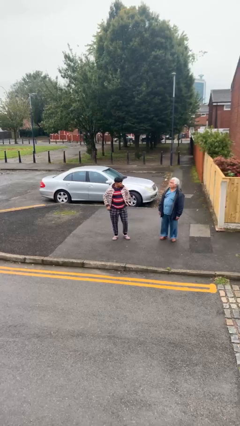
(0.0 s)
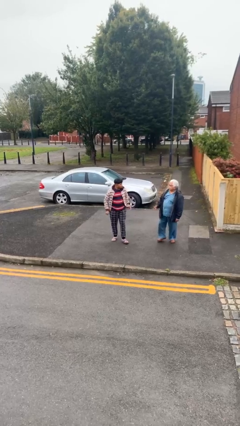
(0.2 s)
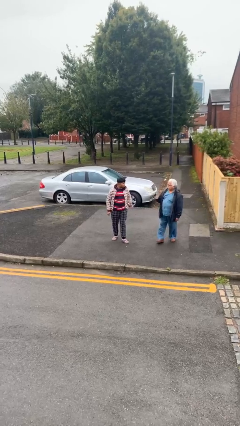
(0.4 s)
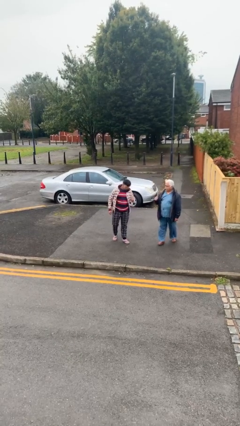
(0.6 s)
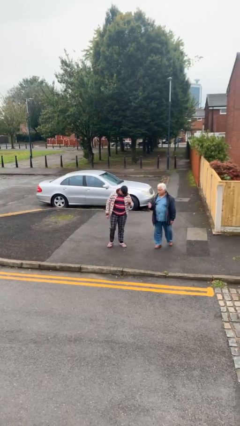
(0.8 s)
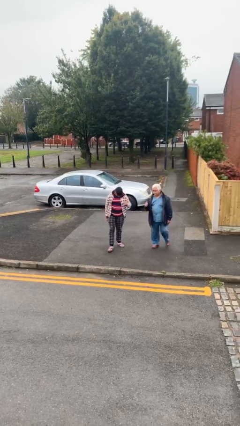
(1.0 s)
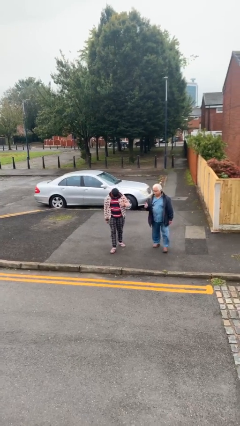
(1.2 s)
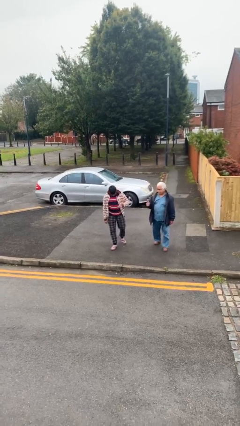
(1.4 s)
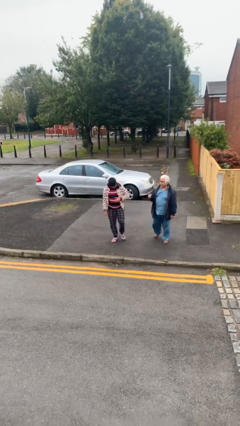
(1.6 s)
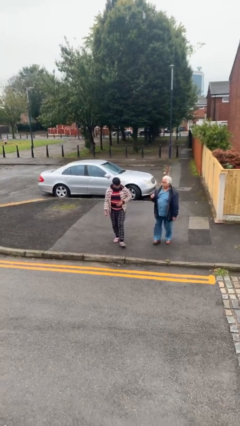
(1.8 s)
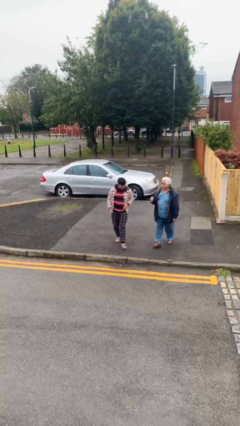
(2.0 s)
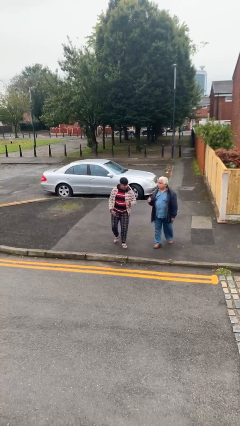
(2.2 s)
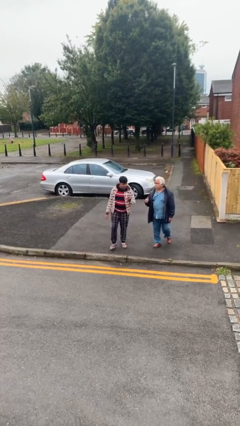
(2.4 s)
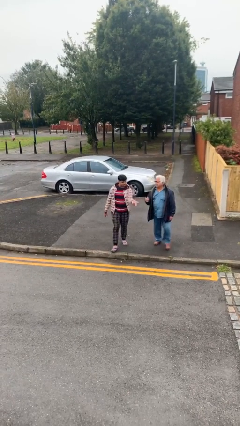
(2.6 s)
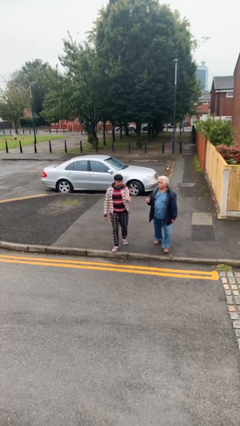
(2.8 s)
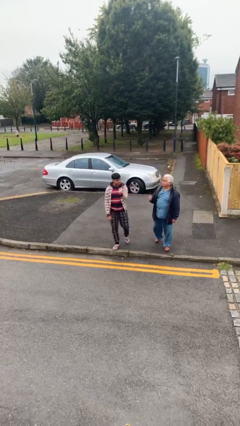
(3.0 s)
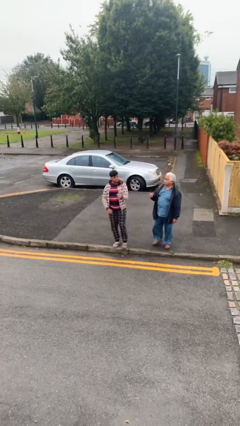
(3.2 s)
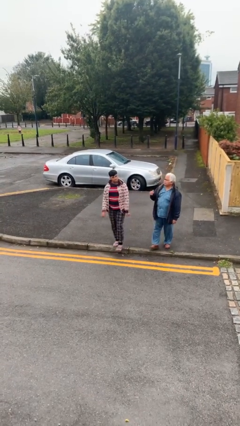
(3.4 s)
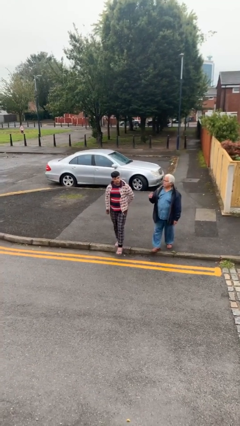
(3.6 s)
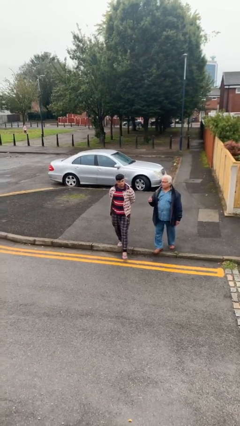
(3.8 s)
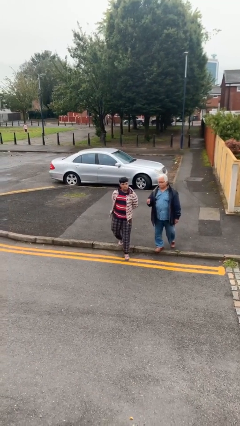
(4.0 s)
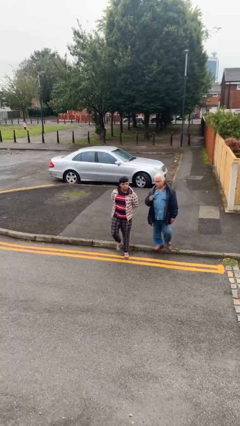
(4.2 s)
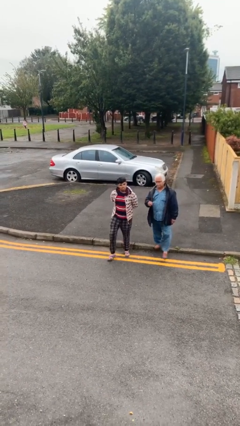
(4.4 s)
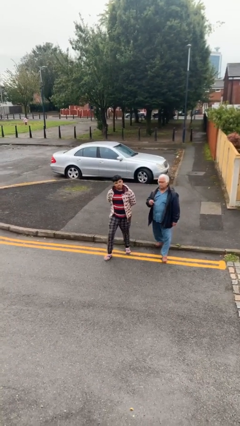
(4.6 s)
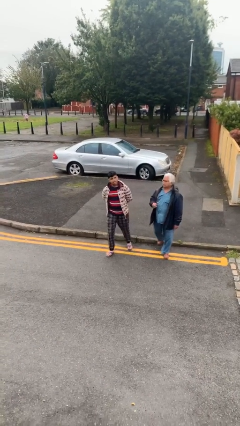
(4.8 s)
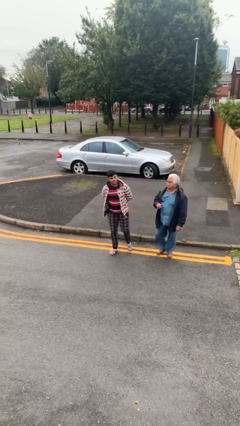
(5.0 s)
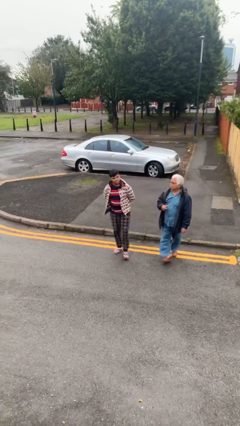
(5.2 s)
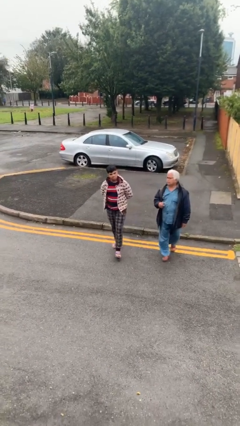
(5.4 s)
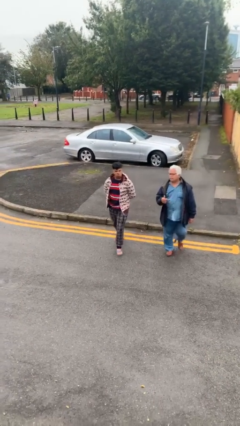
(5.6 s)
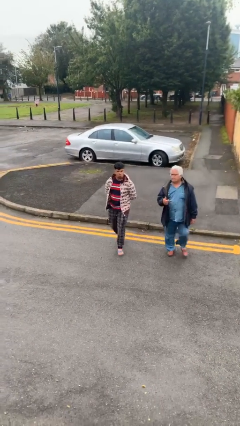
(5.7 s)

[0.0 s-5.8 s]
person talks to person

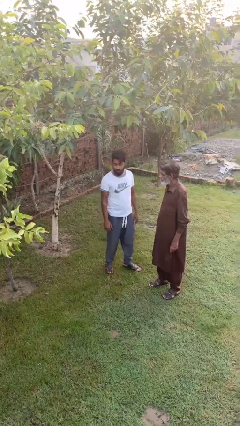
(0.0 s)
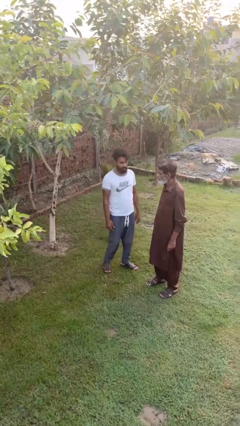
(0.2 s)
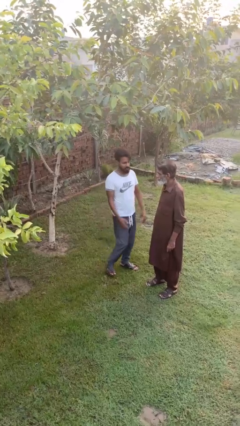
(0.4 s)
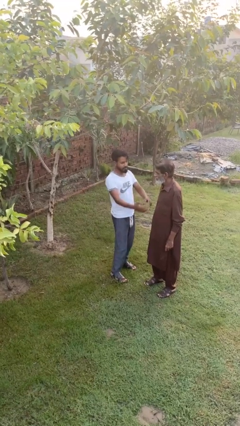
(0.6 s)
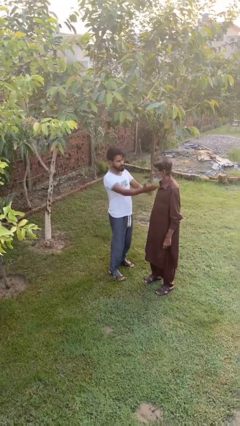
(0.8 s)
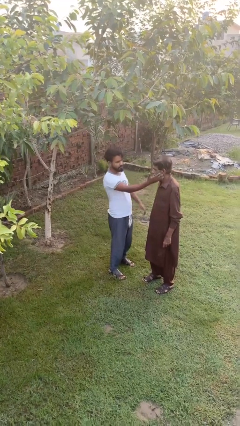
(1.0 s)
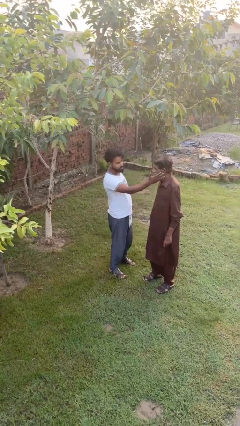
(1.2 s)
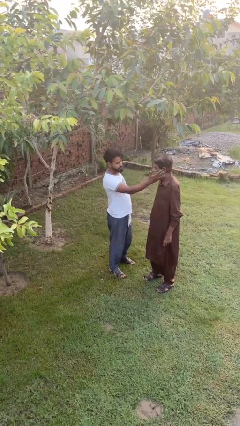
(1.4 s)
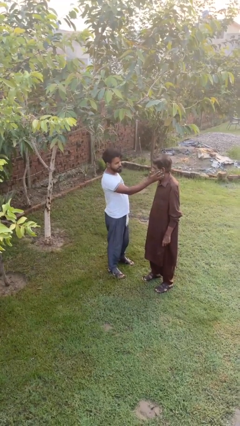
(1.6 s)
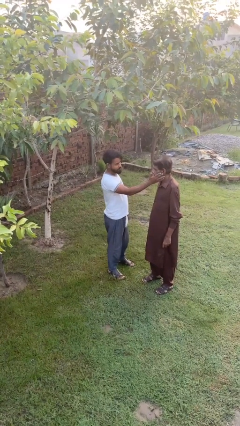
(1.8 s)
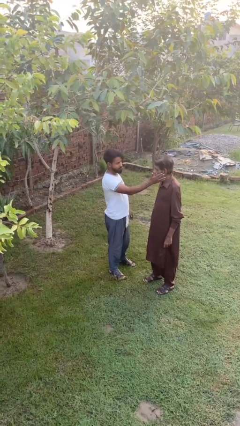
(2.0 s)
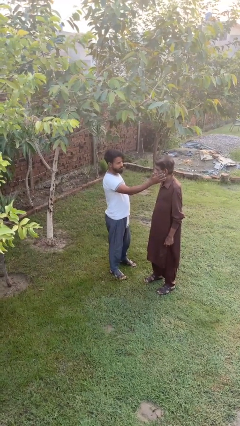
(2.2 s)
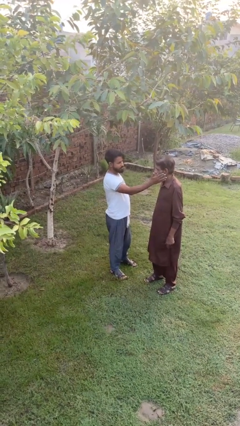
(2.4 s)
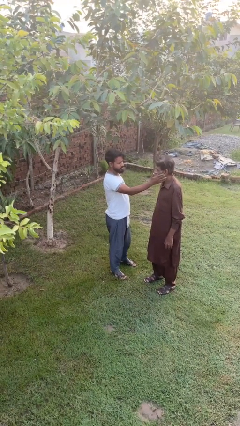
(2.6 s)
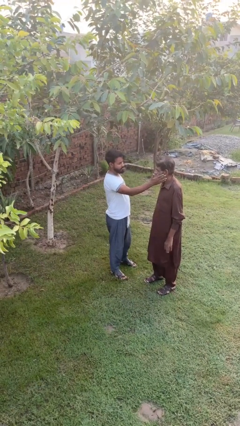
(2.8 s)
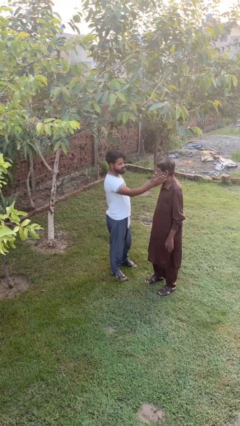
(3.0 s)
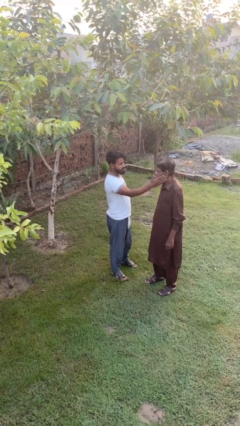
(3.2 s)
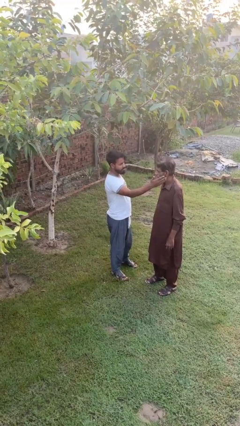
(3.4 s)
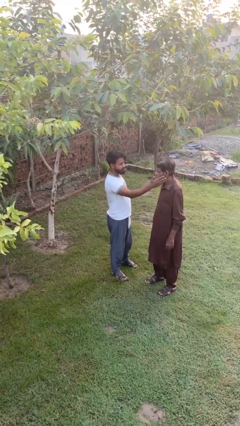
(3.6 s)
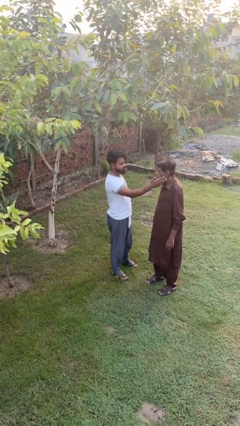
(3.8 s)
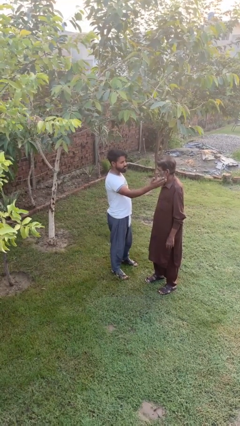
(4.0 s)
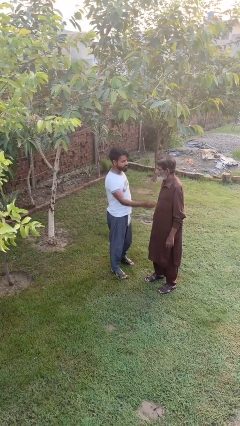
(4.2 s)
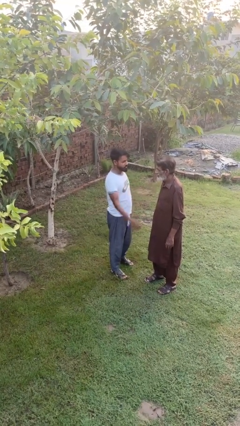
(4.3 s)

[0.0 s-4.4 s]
person touches face of person

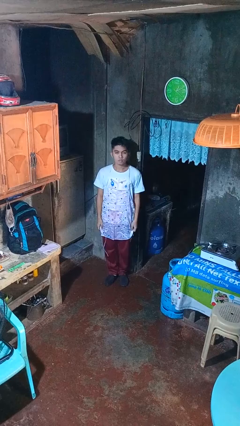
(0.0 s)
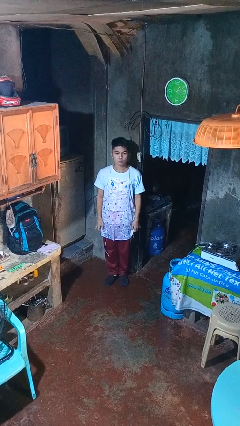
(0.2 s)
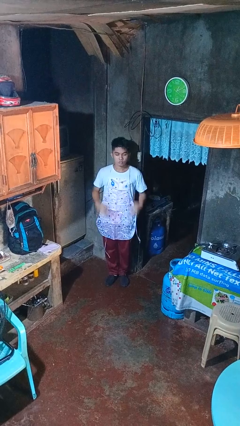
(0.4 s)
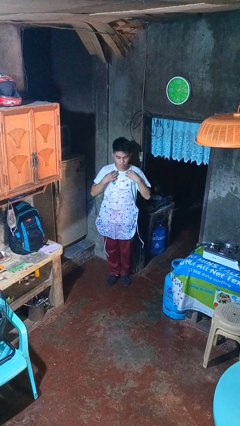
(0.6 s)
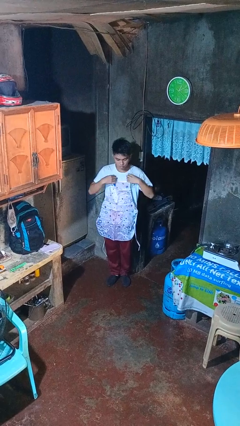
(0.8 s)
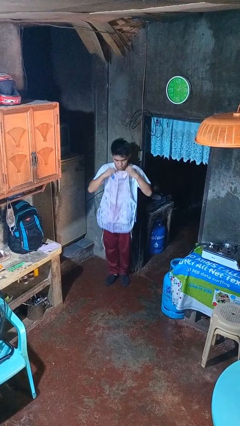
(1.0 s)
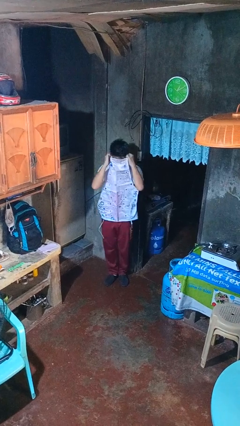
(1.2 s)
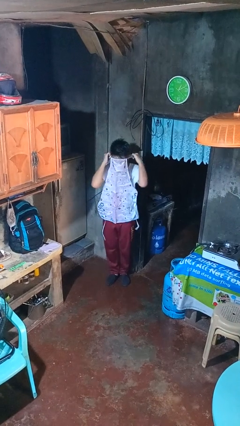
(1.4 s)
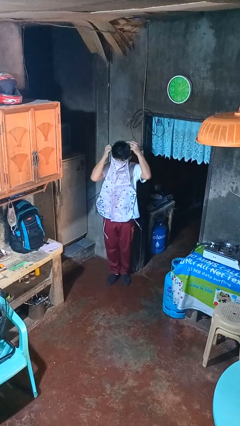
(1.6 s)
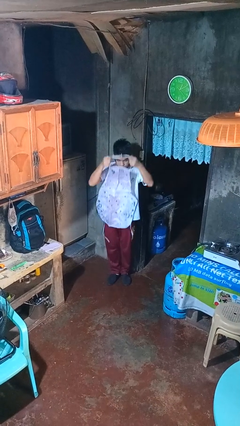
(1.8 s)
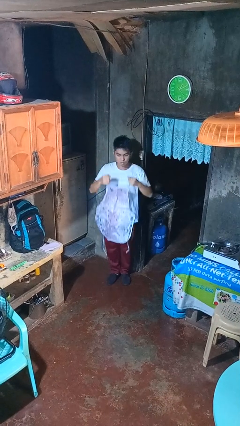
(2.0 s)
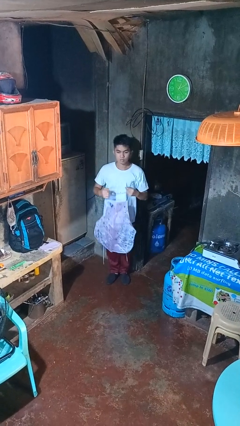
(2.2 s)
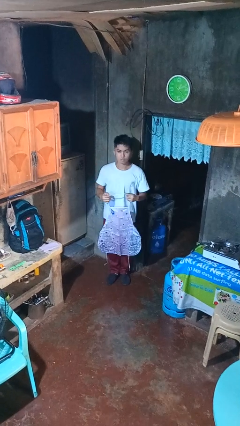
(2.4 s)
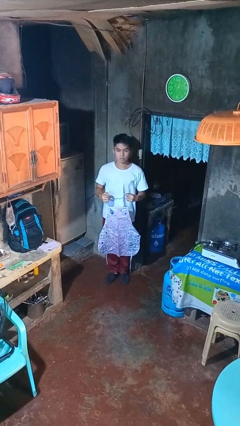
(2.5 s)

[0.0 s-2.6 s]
person takes off apron

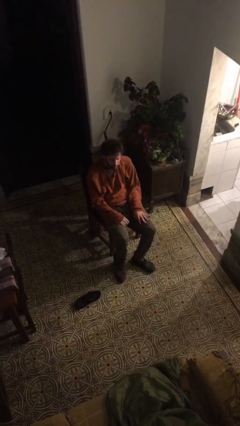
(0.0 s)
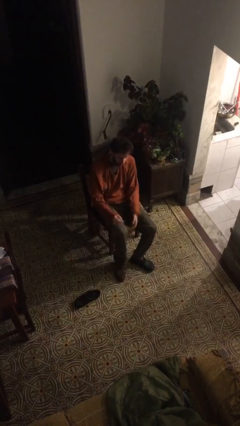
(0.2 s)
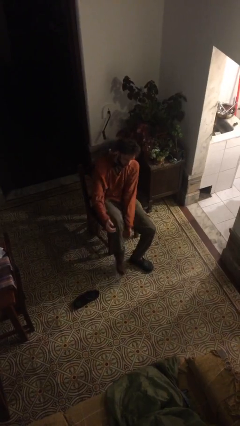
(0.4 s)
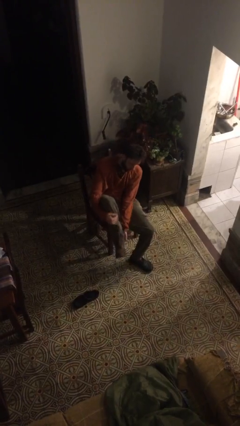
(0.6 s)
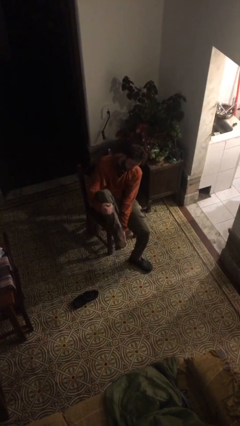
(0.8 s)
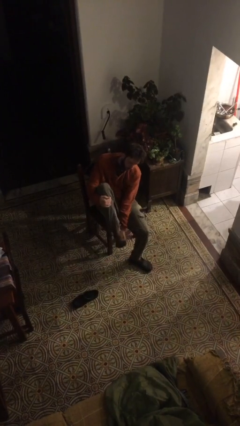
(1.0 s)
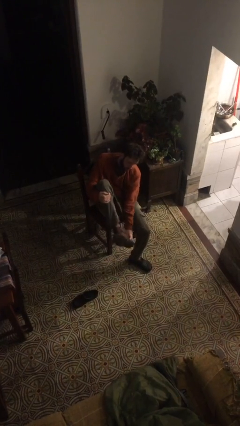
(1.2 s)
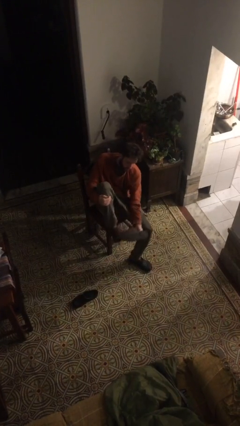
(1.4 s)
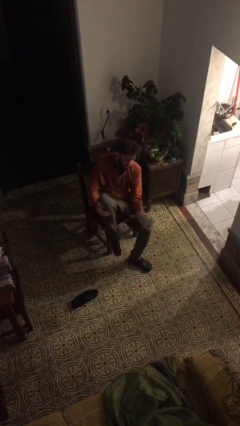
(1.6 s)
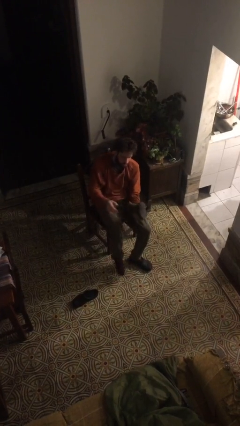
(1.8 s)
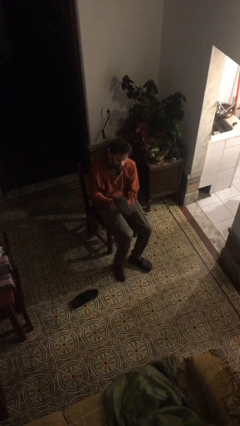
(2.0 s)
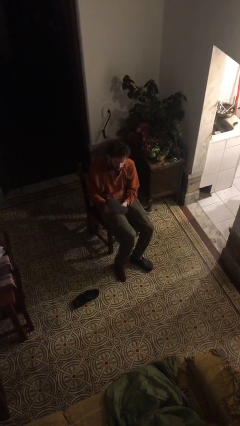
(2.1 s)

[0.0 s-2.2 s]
person takes off boots

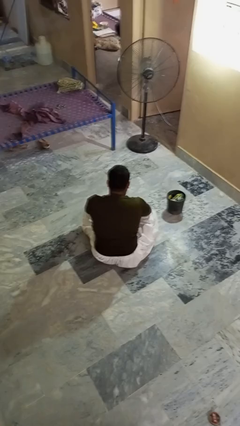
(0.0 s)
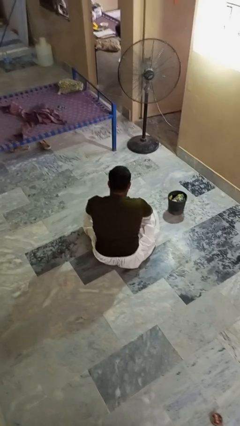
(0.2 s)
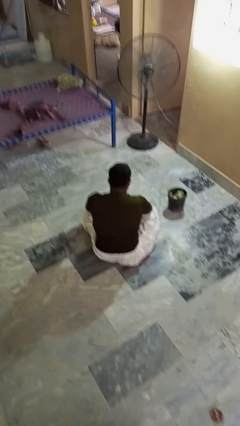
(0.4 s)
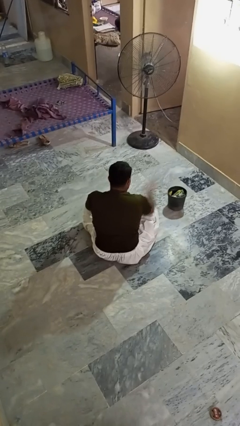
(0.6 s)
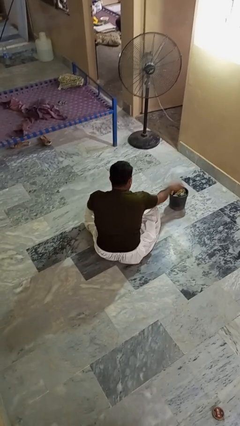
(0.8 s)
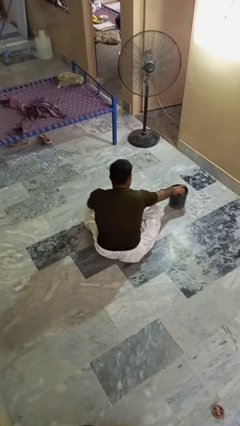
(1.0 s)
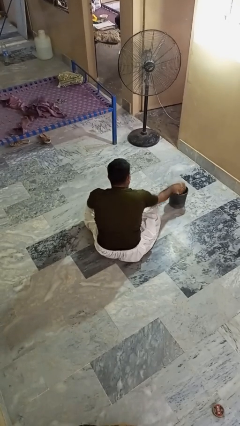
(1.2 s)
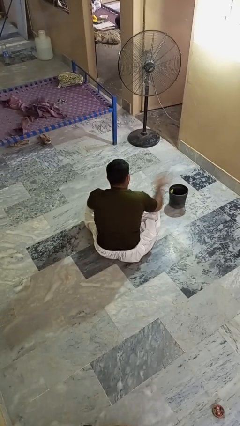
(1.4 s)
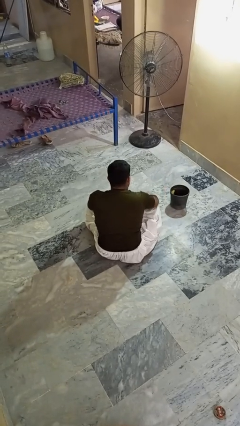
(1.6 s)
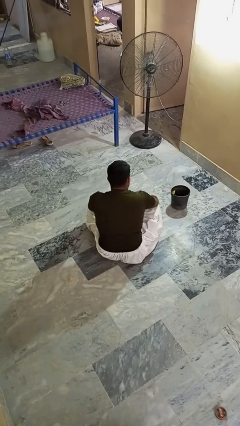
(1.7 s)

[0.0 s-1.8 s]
person takes object from basket

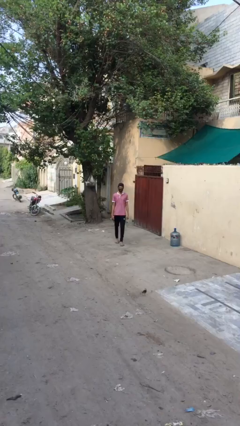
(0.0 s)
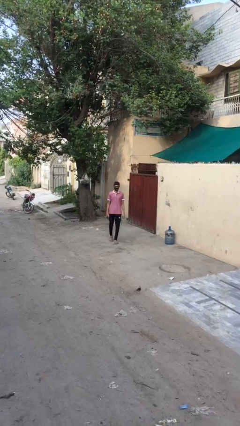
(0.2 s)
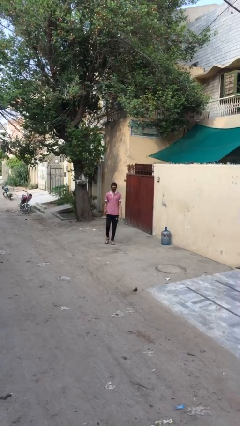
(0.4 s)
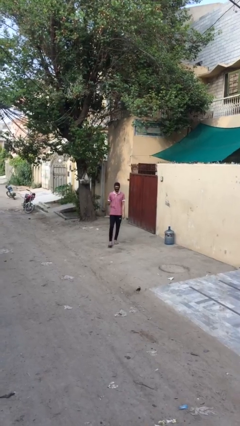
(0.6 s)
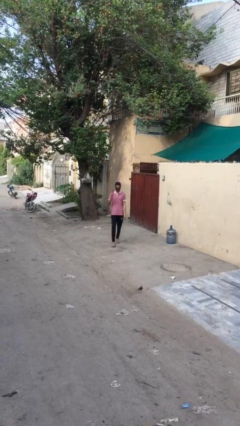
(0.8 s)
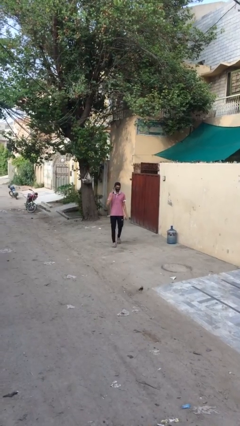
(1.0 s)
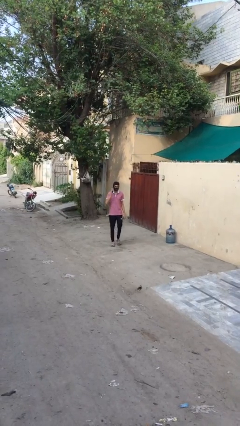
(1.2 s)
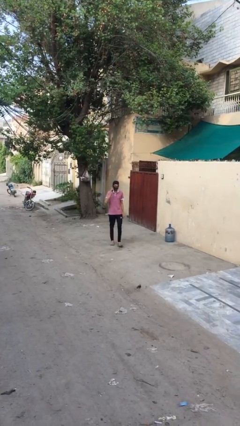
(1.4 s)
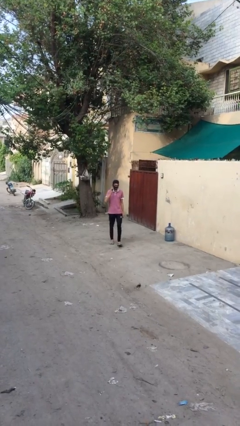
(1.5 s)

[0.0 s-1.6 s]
person talks on phone
